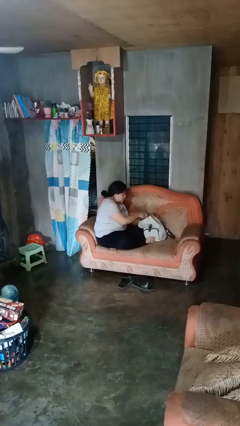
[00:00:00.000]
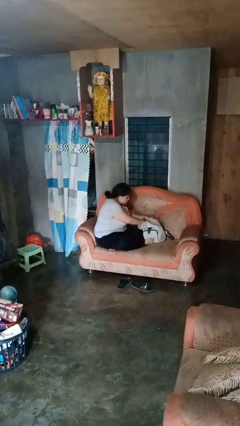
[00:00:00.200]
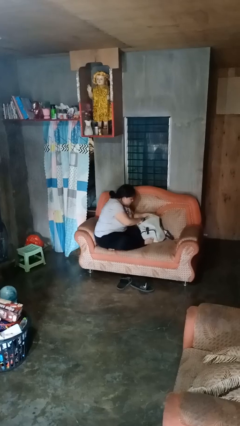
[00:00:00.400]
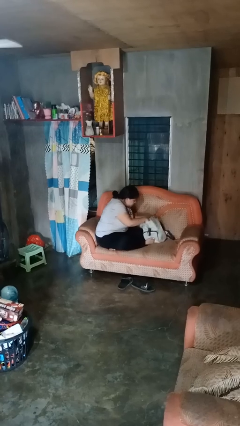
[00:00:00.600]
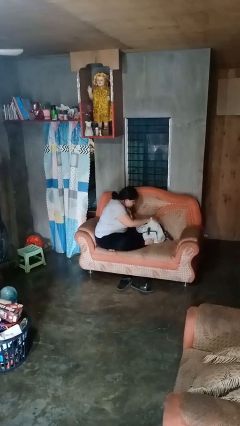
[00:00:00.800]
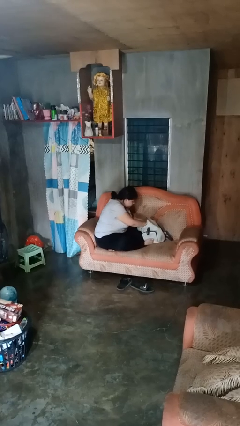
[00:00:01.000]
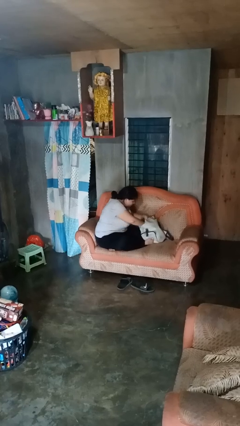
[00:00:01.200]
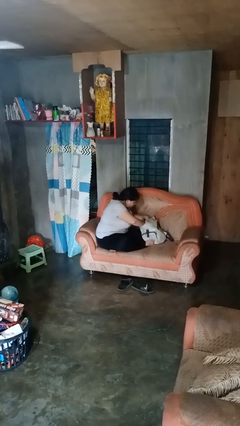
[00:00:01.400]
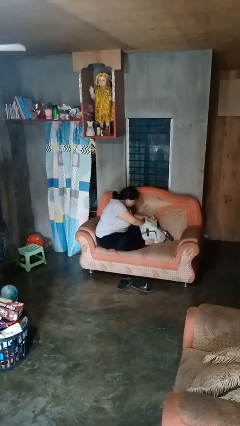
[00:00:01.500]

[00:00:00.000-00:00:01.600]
person searches in backpack

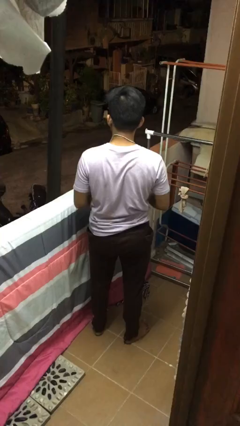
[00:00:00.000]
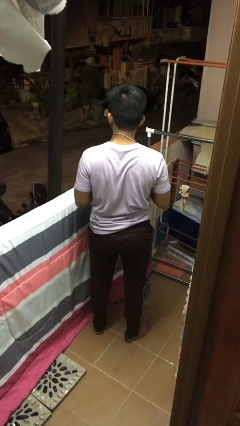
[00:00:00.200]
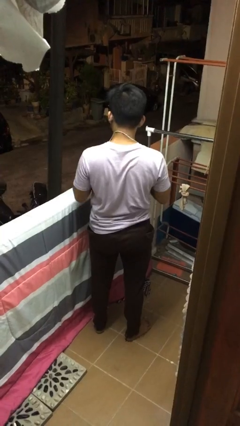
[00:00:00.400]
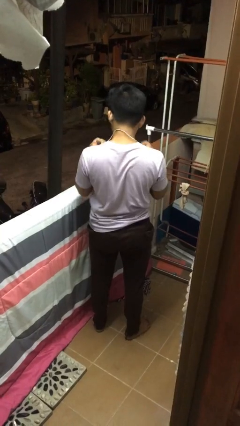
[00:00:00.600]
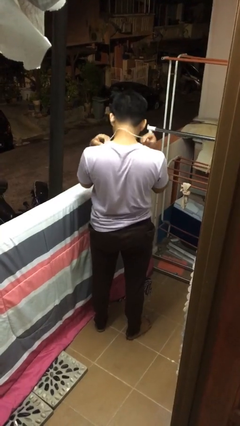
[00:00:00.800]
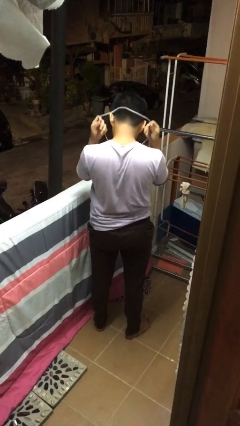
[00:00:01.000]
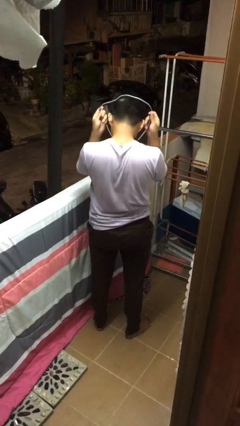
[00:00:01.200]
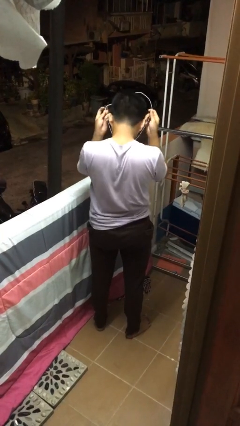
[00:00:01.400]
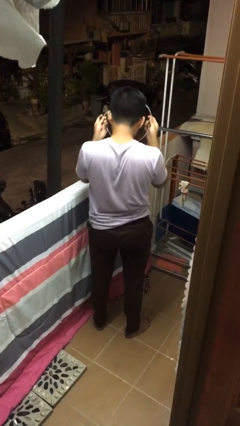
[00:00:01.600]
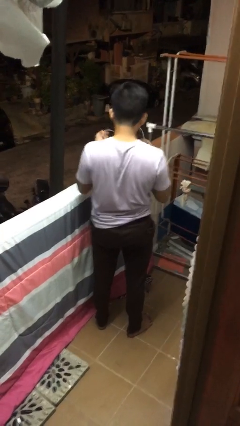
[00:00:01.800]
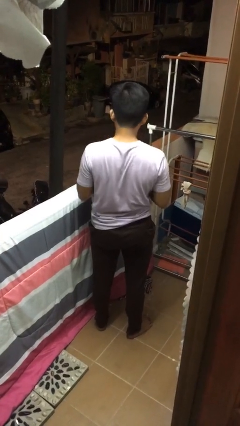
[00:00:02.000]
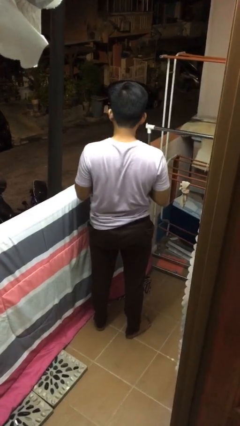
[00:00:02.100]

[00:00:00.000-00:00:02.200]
person takes off necklace

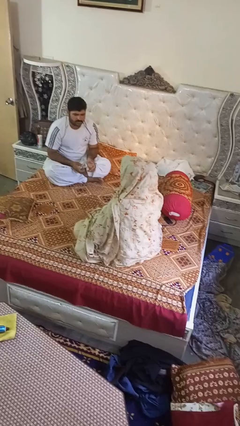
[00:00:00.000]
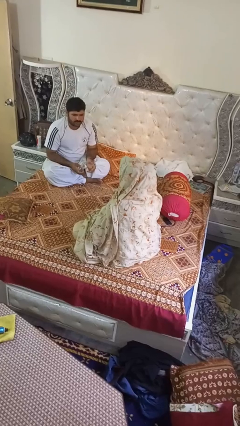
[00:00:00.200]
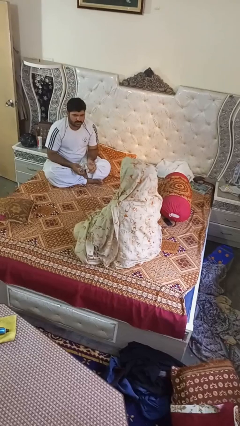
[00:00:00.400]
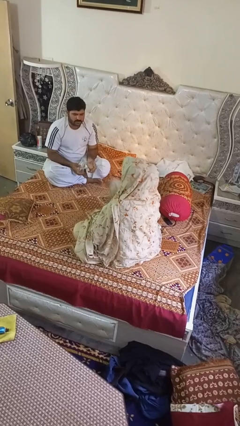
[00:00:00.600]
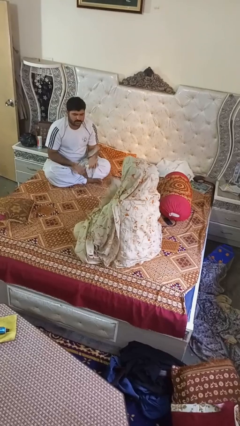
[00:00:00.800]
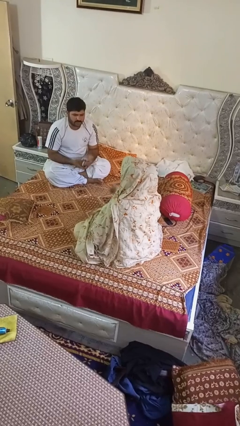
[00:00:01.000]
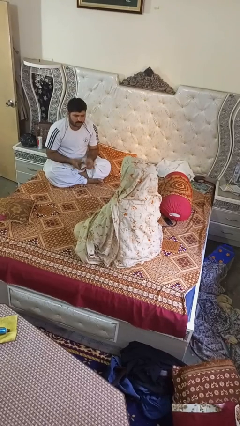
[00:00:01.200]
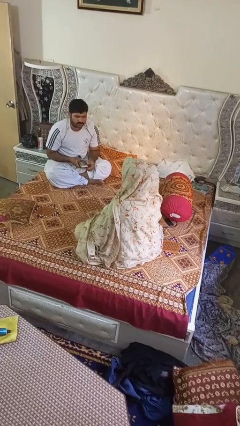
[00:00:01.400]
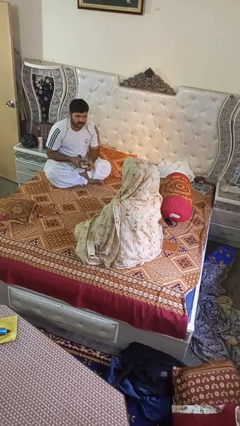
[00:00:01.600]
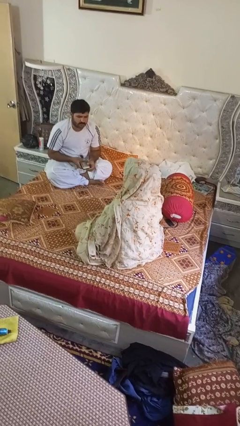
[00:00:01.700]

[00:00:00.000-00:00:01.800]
person throws object to person

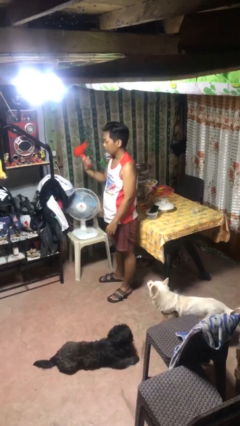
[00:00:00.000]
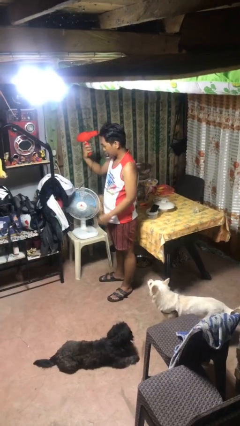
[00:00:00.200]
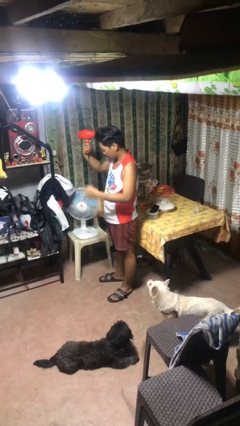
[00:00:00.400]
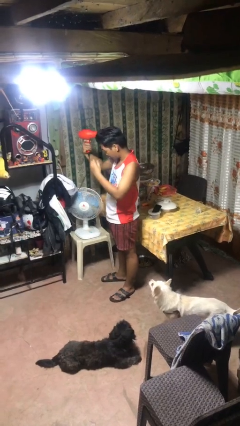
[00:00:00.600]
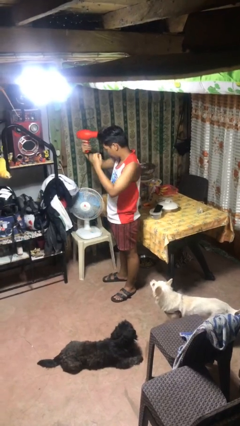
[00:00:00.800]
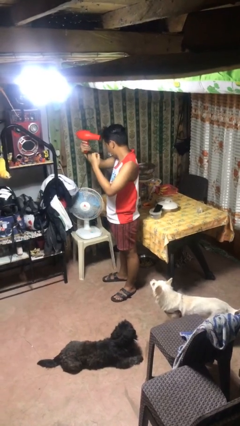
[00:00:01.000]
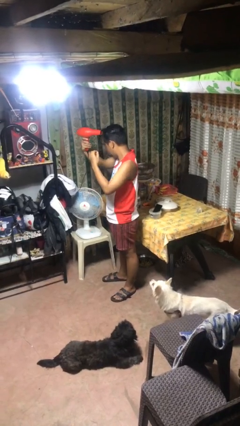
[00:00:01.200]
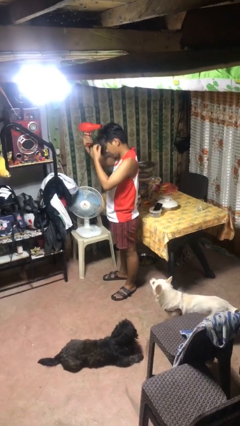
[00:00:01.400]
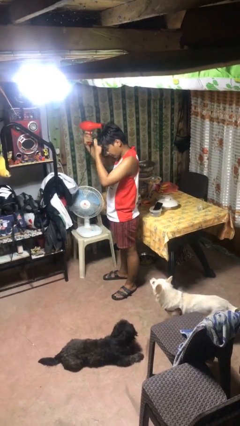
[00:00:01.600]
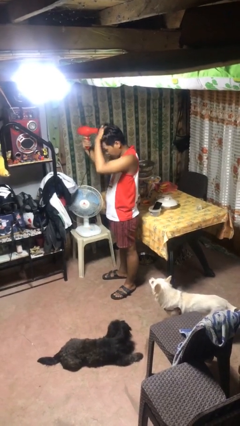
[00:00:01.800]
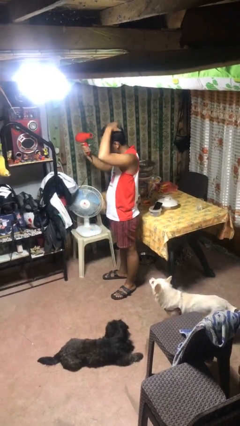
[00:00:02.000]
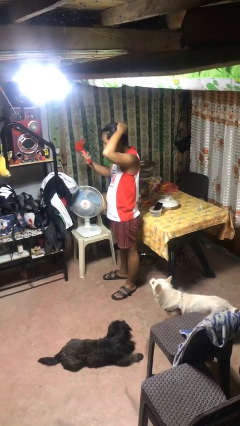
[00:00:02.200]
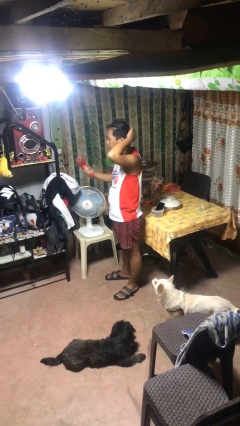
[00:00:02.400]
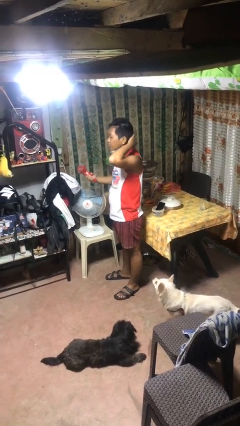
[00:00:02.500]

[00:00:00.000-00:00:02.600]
person dries hair with hairdryer

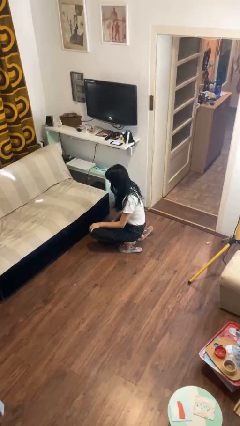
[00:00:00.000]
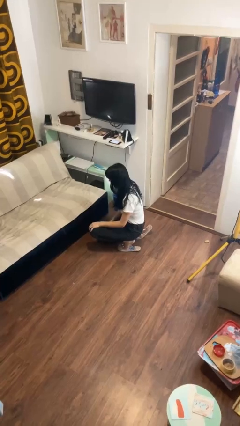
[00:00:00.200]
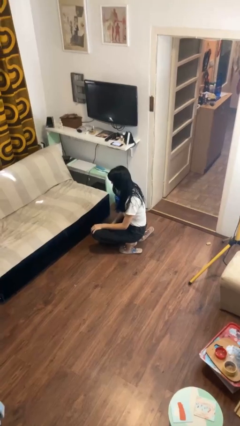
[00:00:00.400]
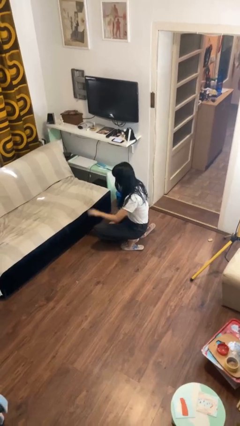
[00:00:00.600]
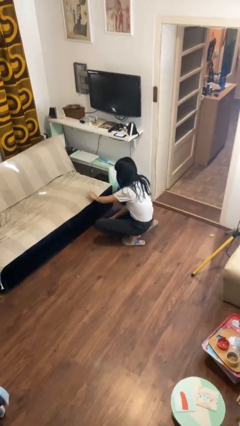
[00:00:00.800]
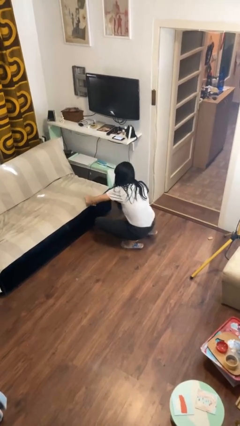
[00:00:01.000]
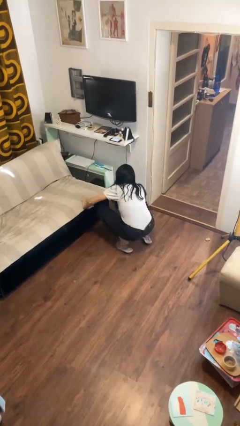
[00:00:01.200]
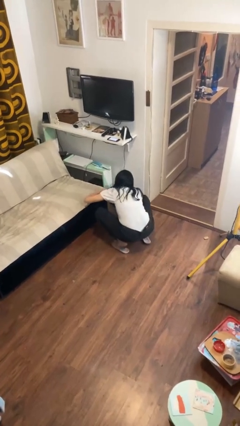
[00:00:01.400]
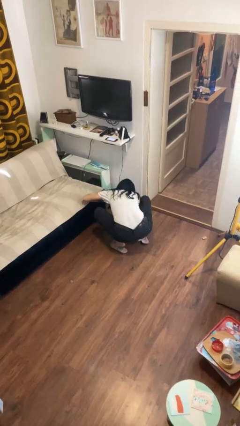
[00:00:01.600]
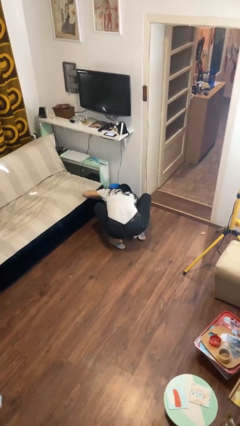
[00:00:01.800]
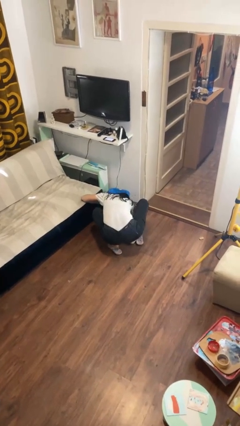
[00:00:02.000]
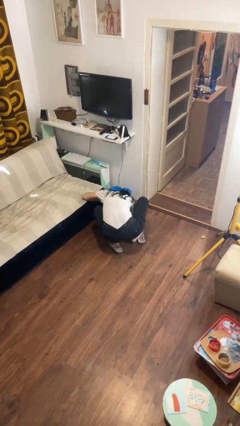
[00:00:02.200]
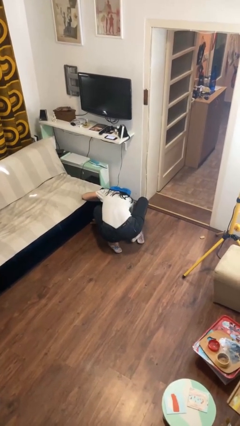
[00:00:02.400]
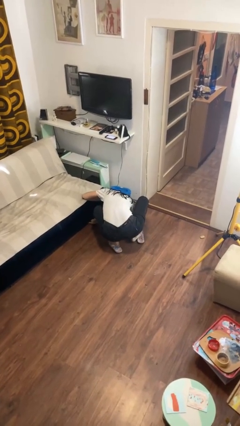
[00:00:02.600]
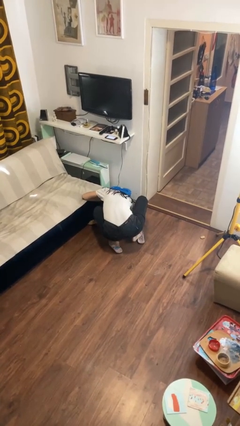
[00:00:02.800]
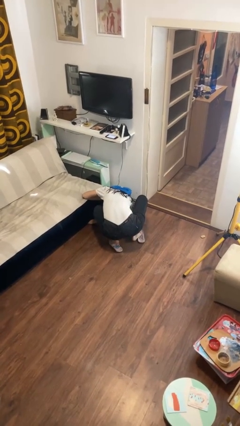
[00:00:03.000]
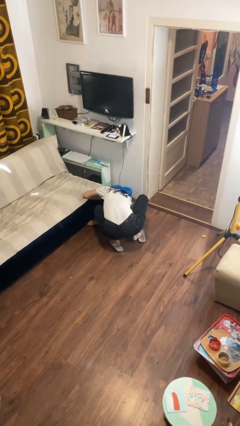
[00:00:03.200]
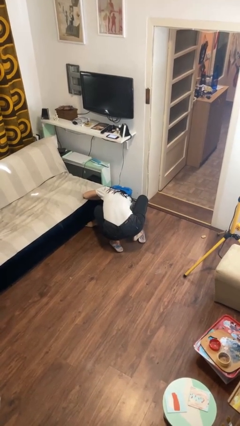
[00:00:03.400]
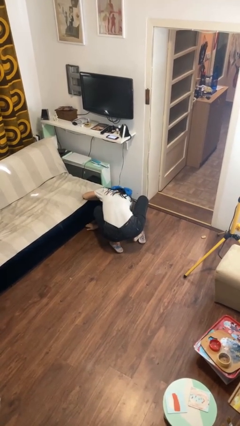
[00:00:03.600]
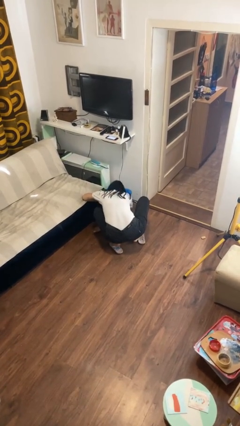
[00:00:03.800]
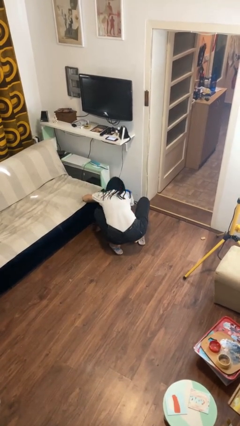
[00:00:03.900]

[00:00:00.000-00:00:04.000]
person searches under couch

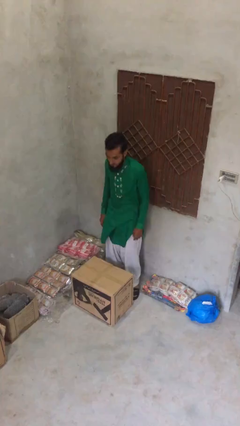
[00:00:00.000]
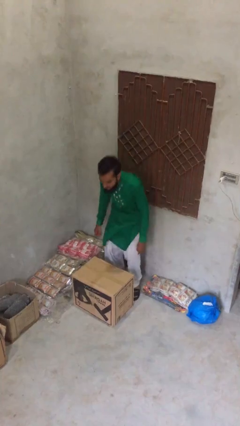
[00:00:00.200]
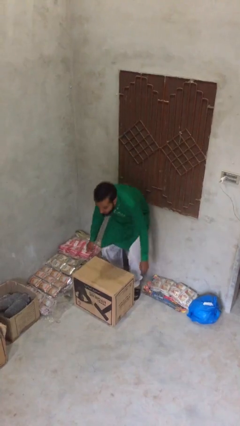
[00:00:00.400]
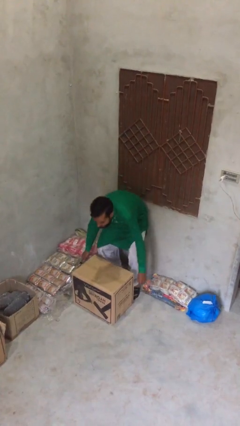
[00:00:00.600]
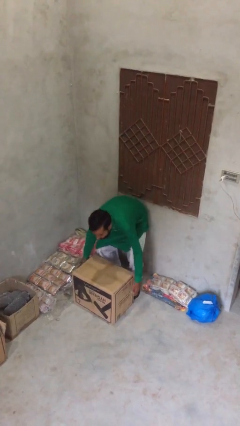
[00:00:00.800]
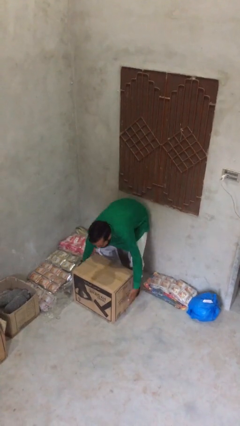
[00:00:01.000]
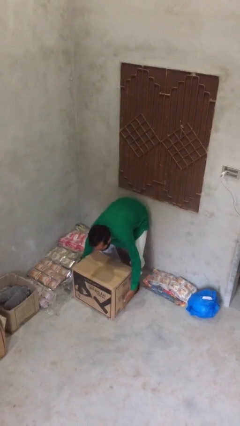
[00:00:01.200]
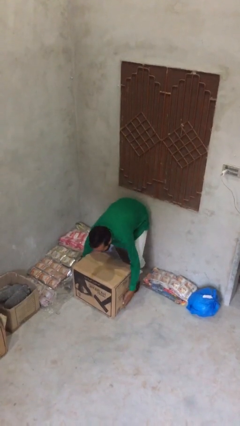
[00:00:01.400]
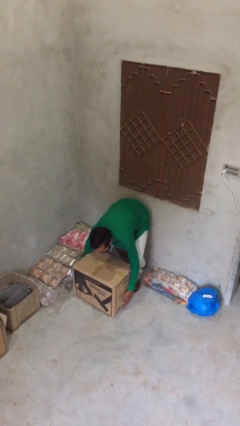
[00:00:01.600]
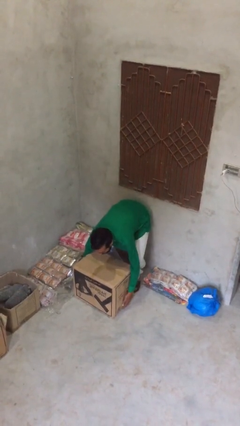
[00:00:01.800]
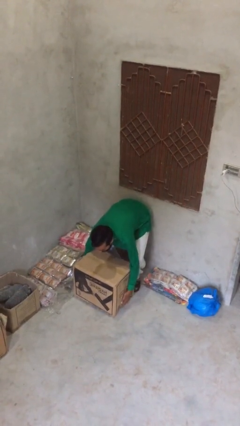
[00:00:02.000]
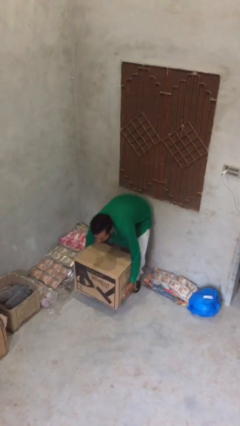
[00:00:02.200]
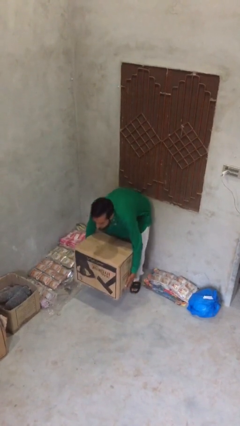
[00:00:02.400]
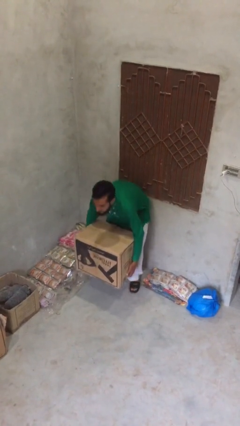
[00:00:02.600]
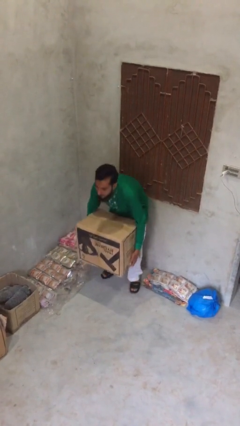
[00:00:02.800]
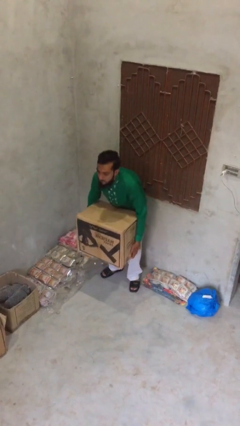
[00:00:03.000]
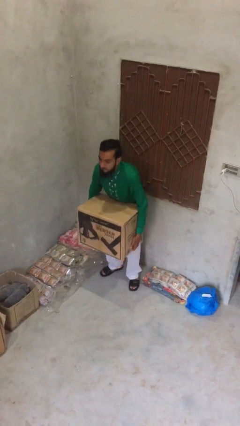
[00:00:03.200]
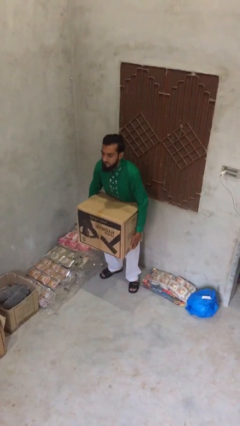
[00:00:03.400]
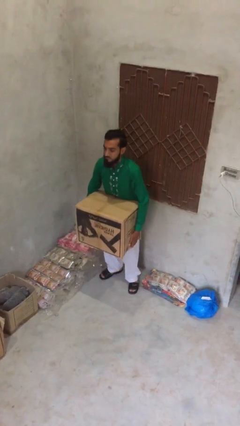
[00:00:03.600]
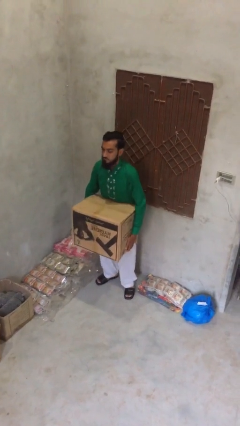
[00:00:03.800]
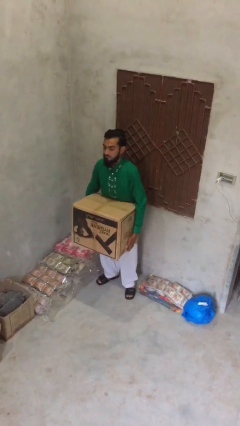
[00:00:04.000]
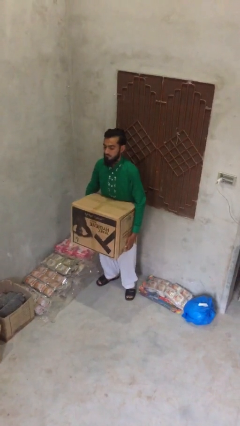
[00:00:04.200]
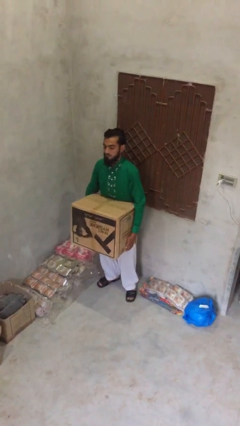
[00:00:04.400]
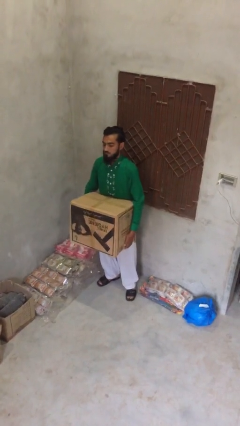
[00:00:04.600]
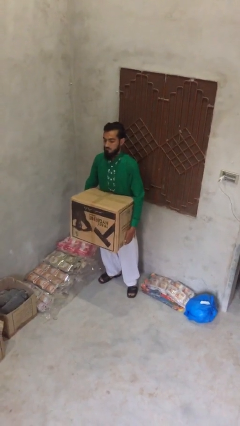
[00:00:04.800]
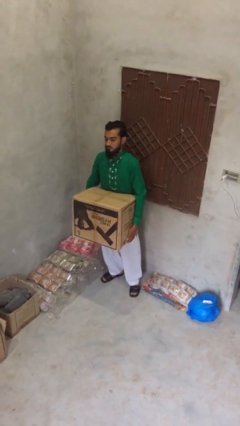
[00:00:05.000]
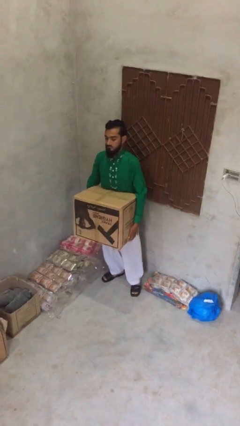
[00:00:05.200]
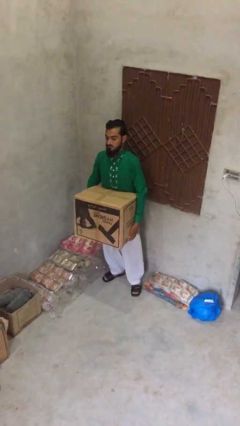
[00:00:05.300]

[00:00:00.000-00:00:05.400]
person picks up object from floor
